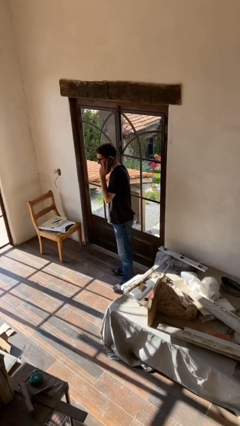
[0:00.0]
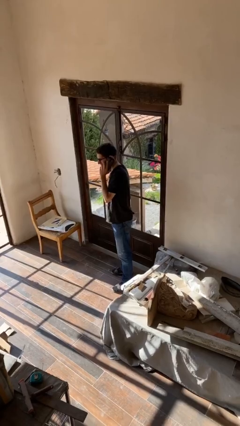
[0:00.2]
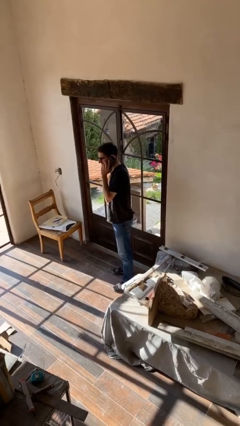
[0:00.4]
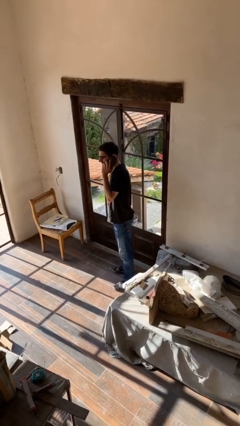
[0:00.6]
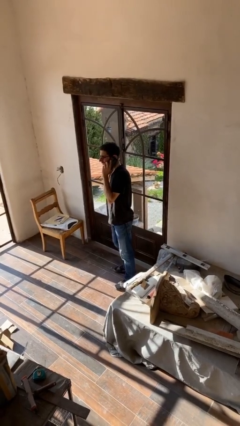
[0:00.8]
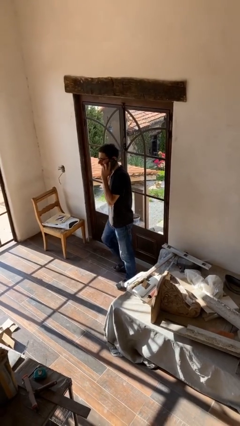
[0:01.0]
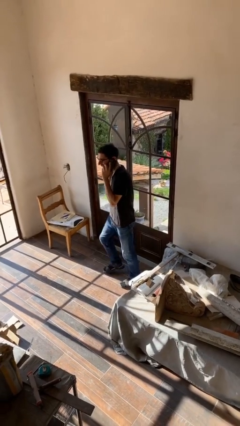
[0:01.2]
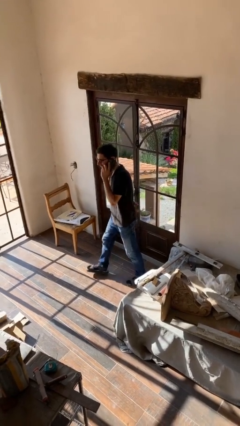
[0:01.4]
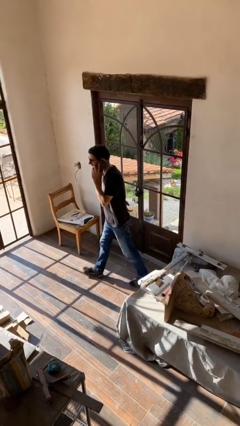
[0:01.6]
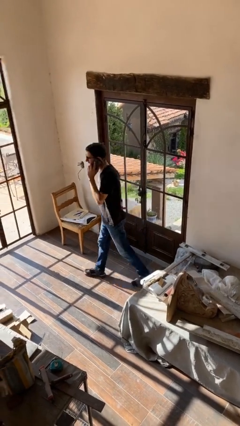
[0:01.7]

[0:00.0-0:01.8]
person closes facility door

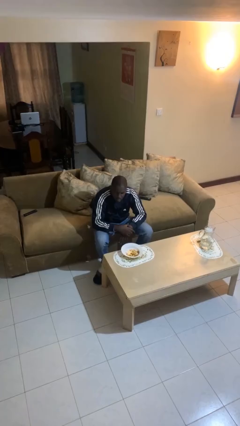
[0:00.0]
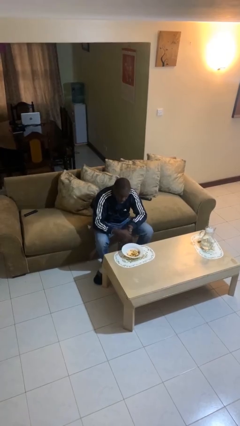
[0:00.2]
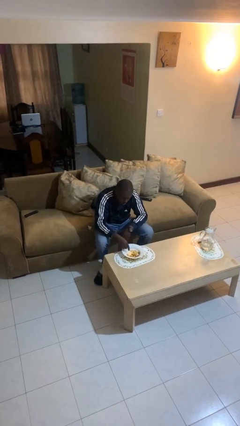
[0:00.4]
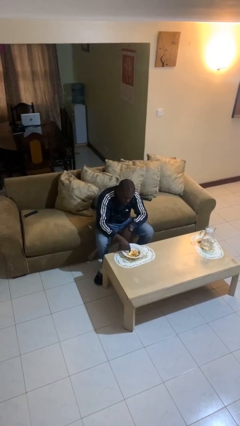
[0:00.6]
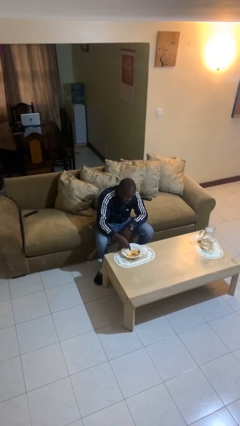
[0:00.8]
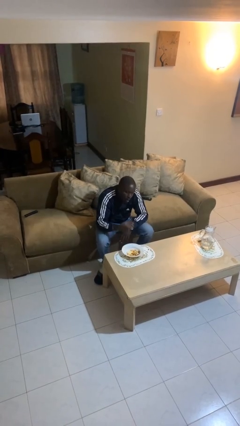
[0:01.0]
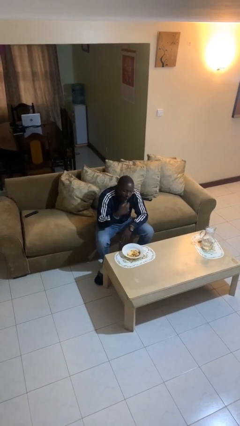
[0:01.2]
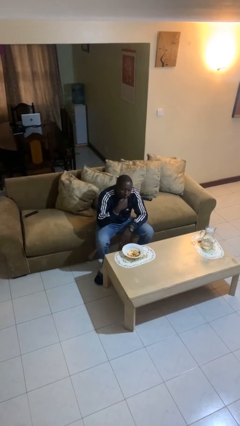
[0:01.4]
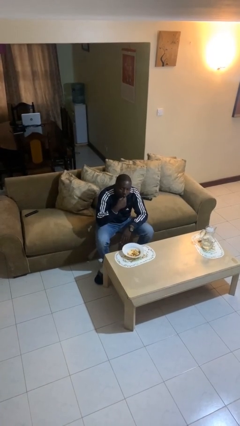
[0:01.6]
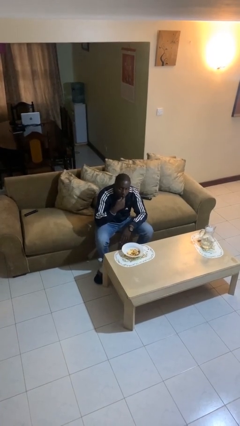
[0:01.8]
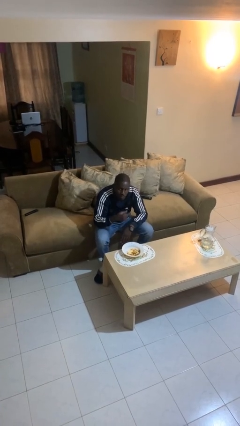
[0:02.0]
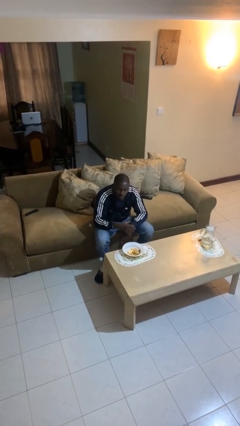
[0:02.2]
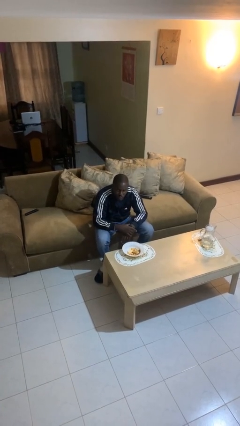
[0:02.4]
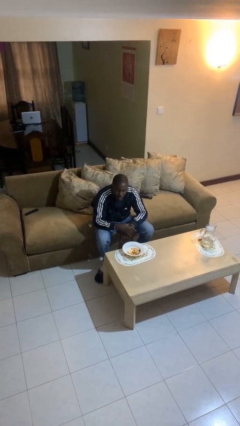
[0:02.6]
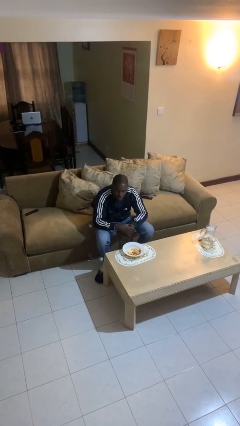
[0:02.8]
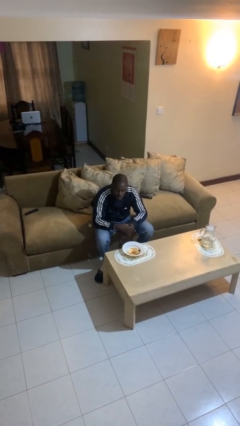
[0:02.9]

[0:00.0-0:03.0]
person eats with hands

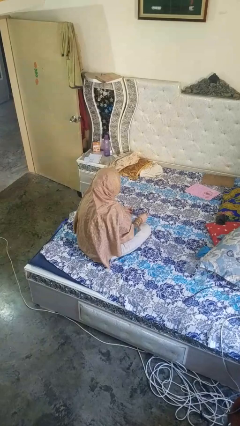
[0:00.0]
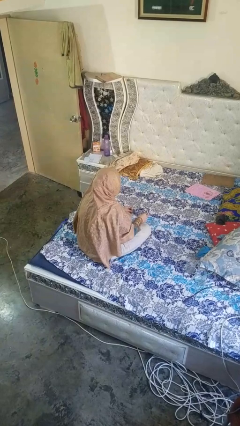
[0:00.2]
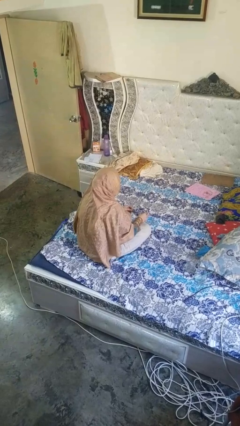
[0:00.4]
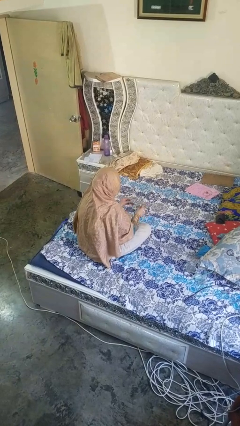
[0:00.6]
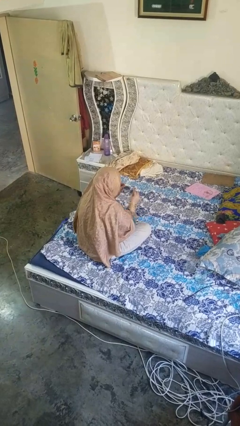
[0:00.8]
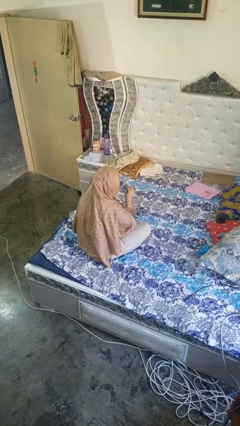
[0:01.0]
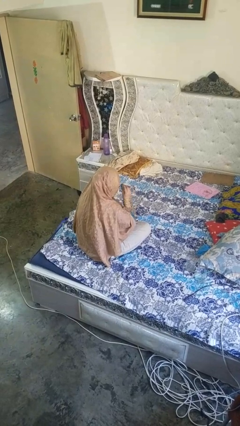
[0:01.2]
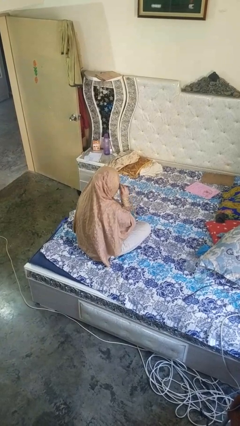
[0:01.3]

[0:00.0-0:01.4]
person puts on glasses

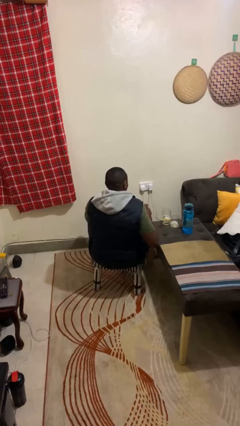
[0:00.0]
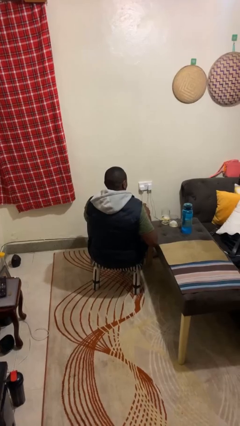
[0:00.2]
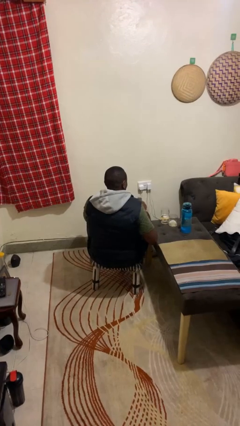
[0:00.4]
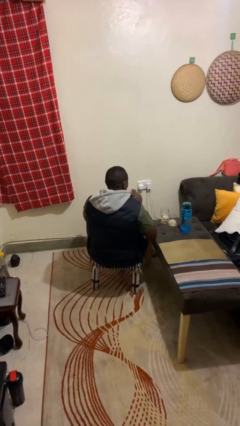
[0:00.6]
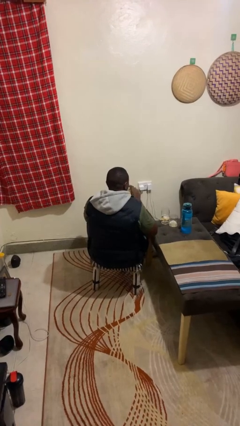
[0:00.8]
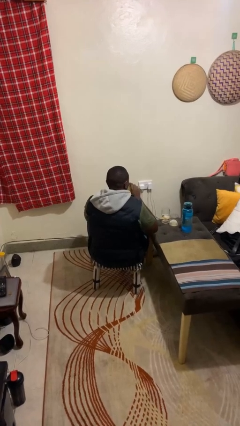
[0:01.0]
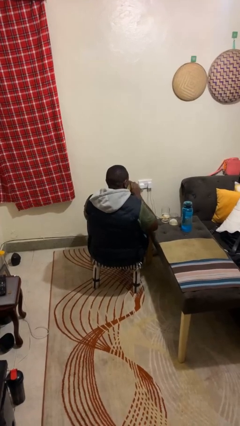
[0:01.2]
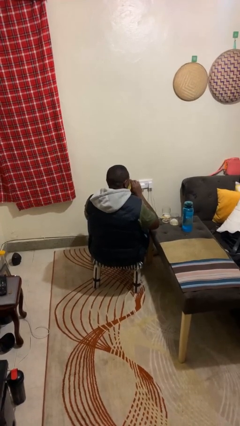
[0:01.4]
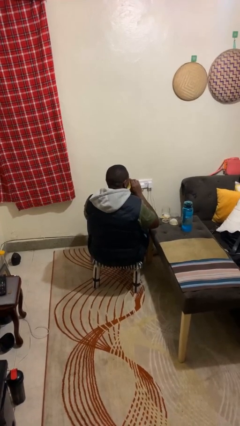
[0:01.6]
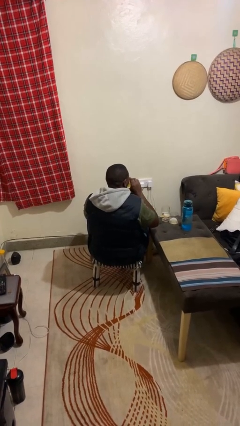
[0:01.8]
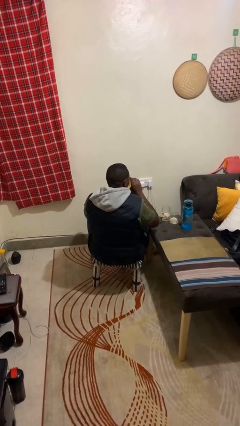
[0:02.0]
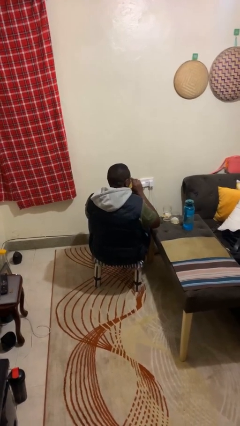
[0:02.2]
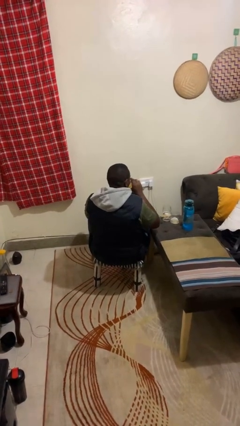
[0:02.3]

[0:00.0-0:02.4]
person drinks from shotglass

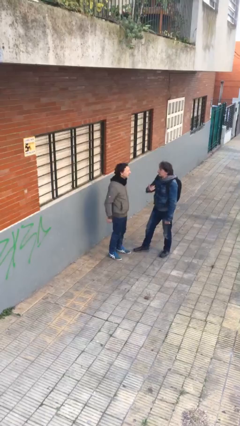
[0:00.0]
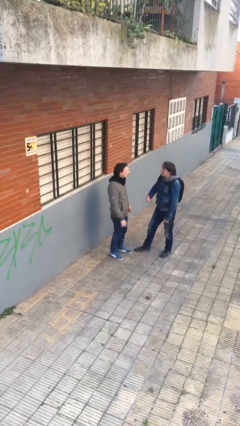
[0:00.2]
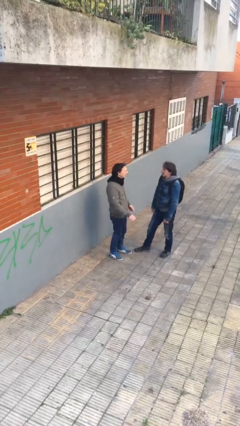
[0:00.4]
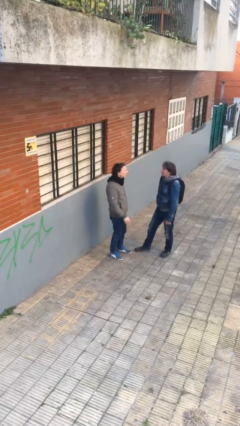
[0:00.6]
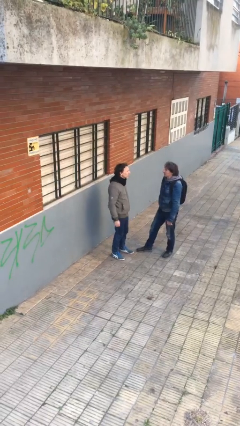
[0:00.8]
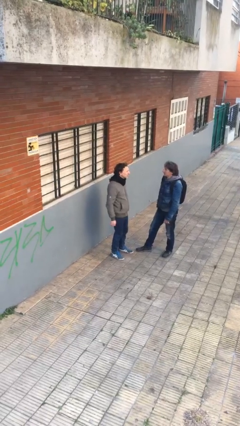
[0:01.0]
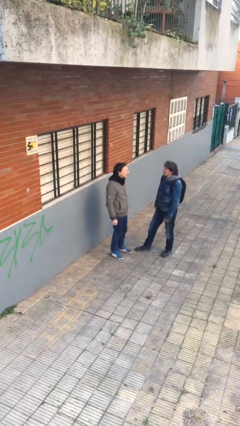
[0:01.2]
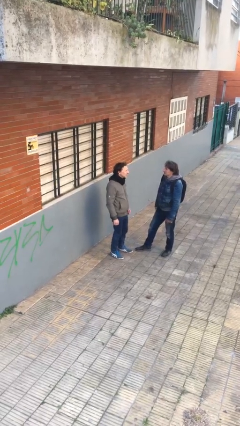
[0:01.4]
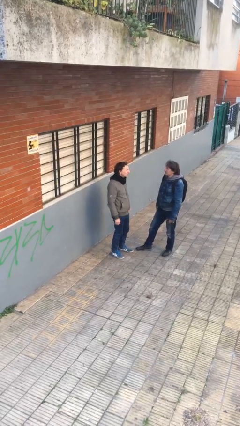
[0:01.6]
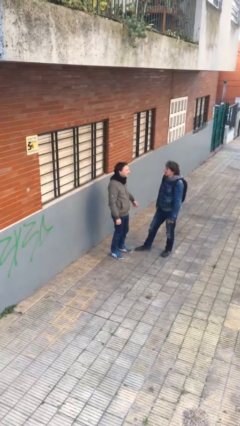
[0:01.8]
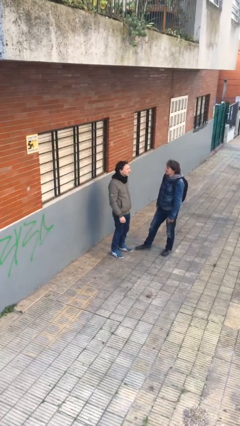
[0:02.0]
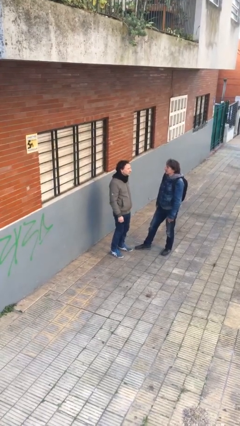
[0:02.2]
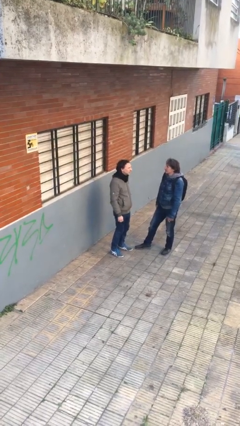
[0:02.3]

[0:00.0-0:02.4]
person talks to person

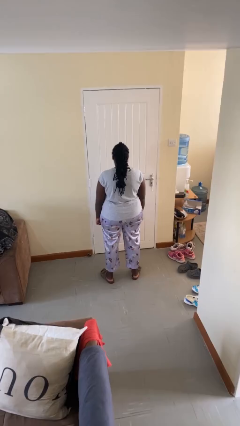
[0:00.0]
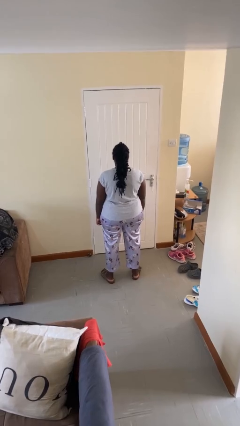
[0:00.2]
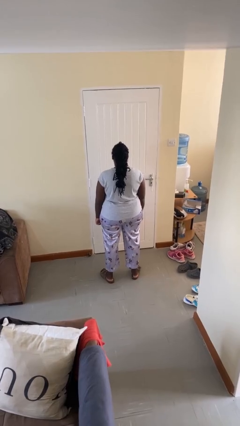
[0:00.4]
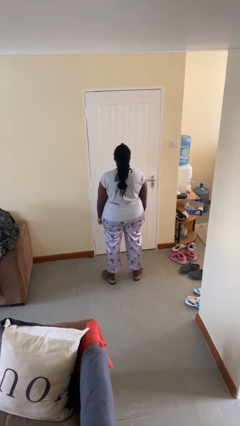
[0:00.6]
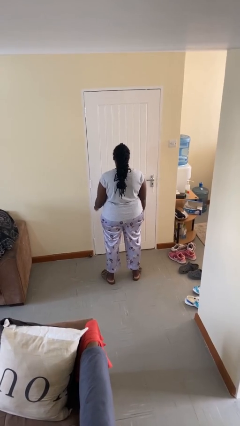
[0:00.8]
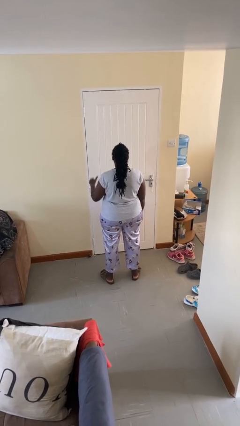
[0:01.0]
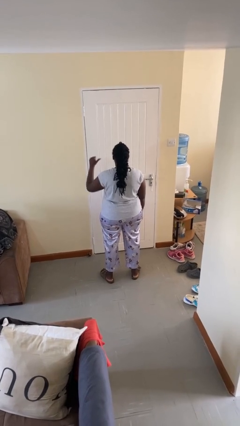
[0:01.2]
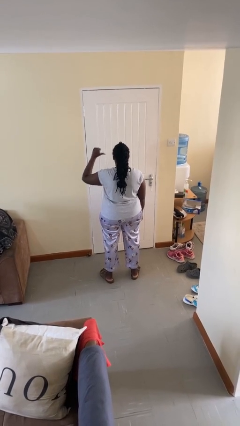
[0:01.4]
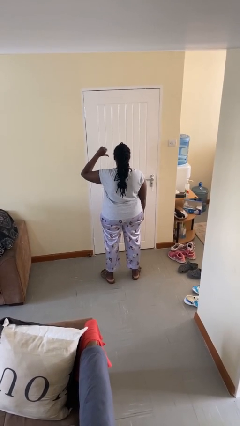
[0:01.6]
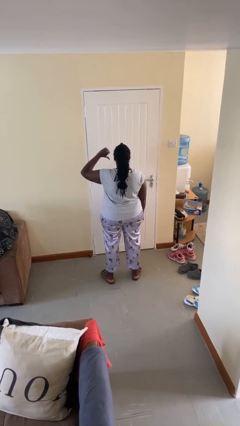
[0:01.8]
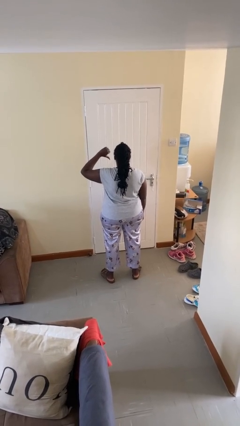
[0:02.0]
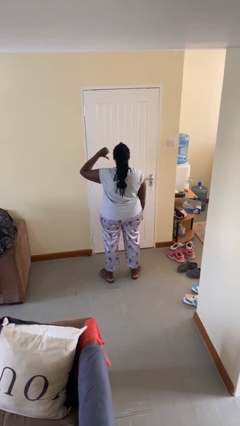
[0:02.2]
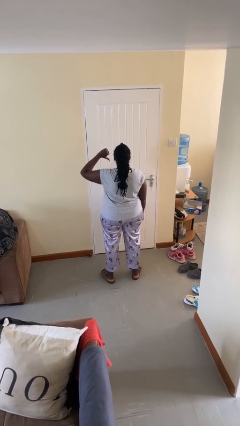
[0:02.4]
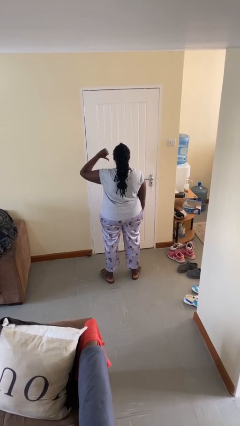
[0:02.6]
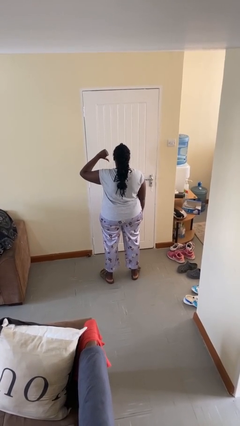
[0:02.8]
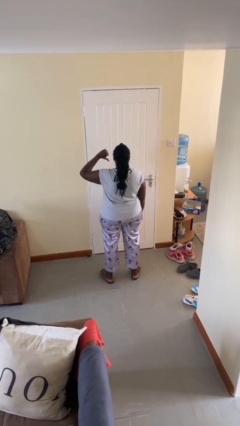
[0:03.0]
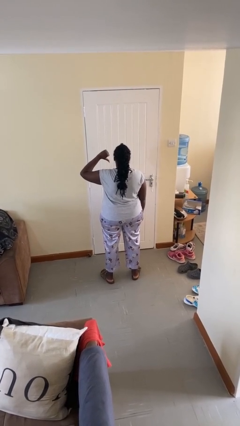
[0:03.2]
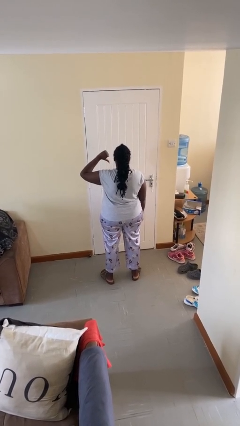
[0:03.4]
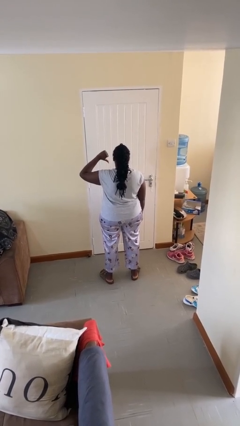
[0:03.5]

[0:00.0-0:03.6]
person gestures thumbs down

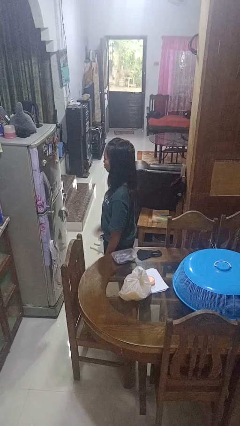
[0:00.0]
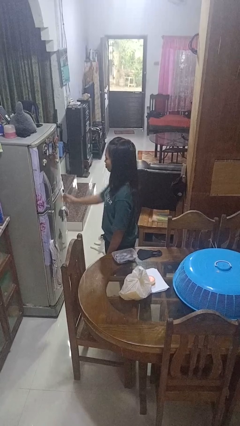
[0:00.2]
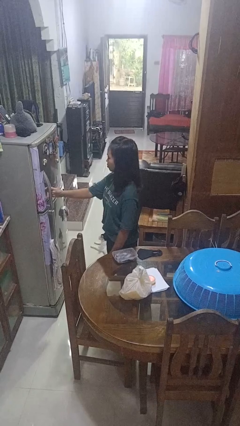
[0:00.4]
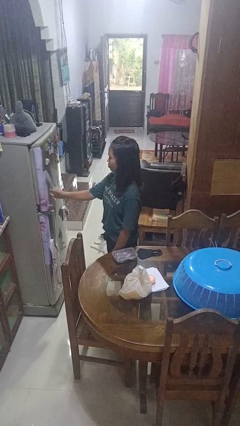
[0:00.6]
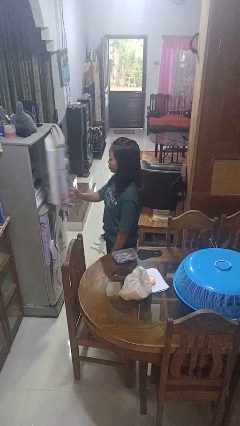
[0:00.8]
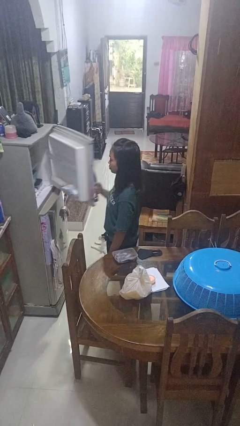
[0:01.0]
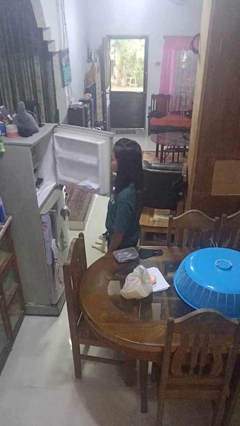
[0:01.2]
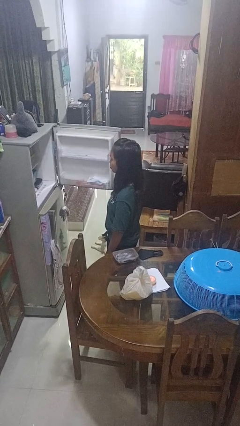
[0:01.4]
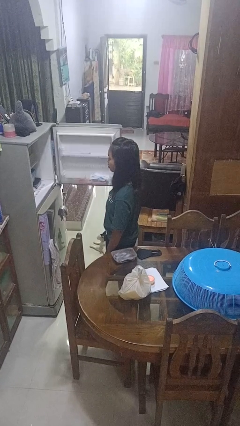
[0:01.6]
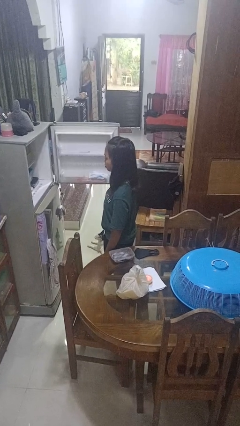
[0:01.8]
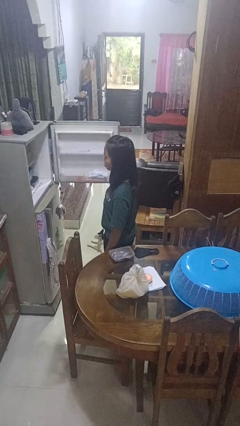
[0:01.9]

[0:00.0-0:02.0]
person opens refrigerator
